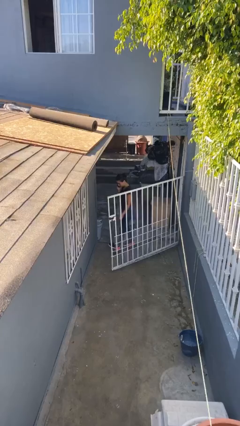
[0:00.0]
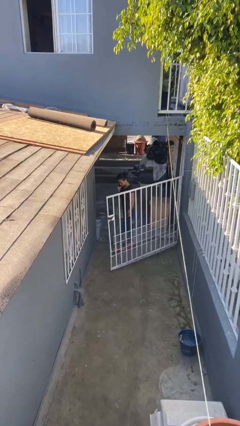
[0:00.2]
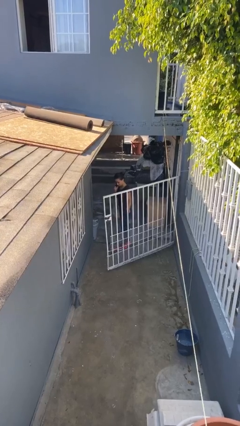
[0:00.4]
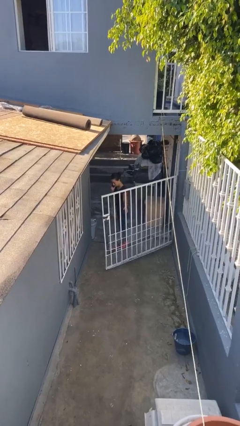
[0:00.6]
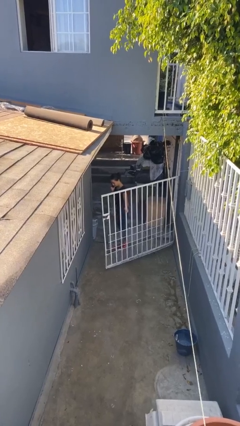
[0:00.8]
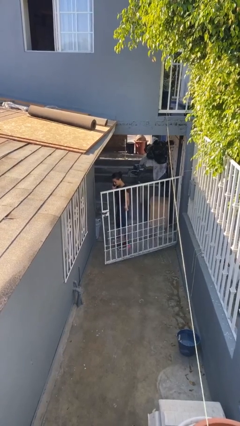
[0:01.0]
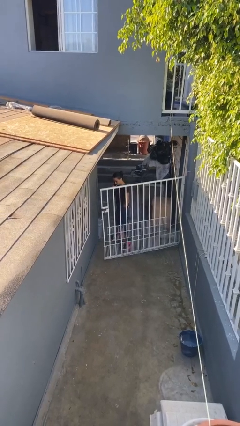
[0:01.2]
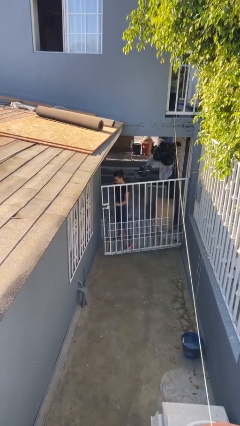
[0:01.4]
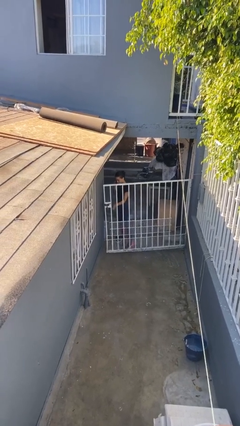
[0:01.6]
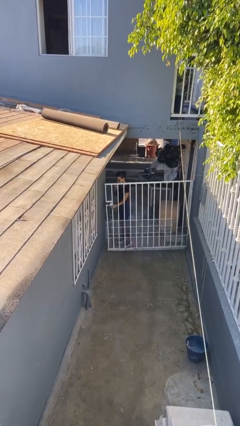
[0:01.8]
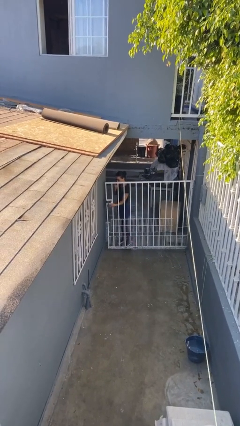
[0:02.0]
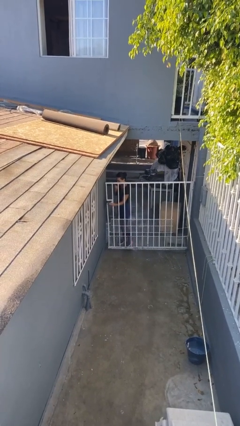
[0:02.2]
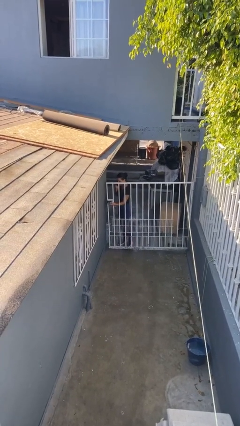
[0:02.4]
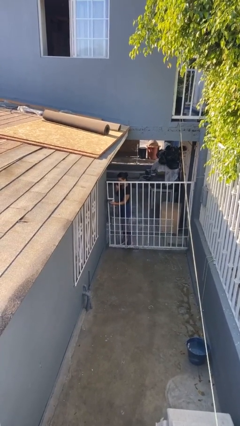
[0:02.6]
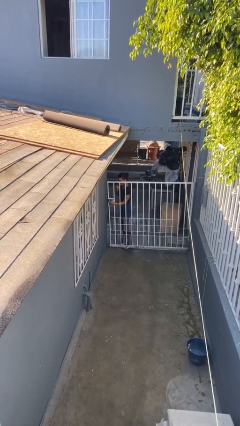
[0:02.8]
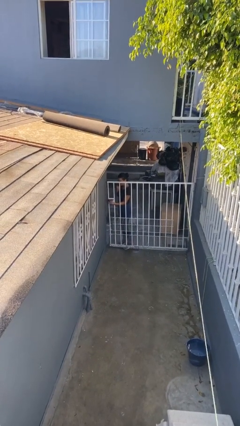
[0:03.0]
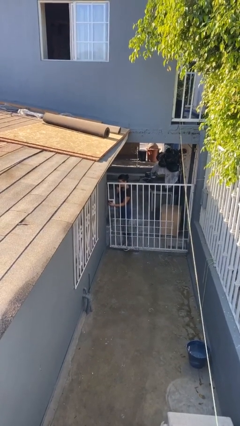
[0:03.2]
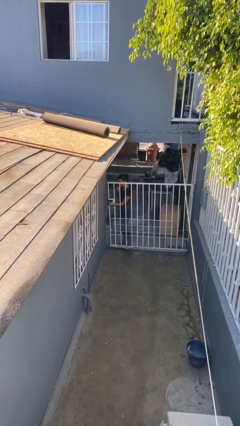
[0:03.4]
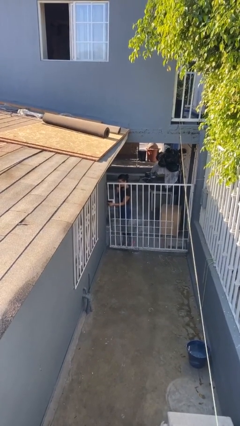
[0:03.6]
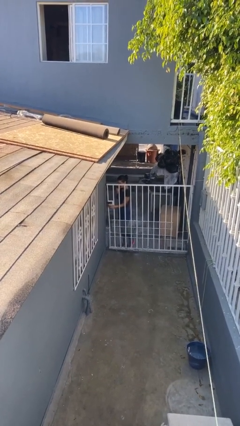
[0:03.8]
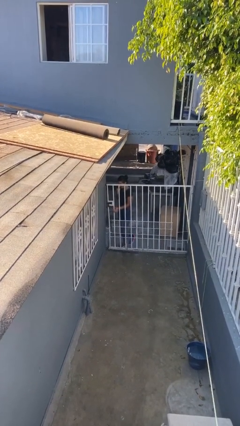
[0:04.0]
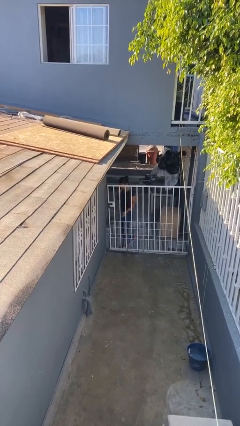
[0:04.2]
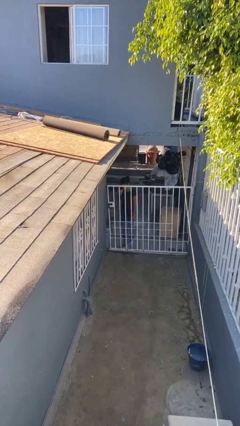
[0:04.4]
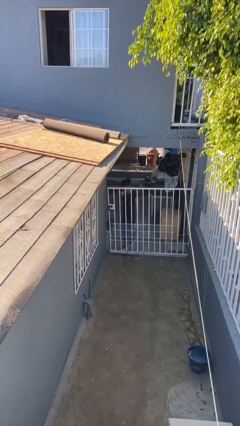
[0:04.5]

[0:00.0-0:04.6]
person closes facility door

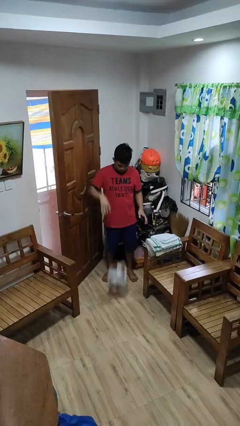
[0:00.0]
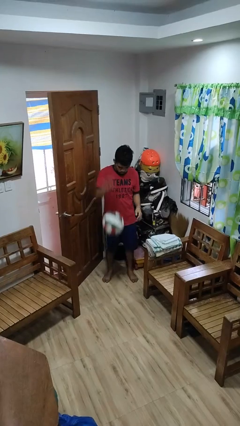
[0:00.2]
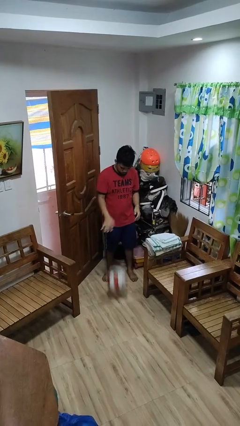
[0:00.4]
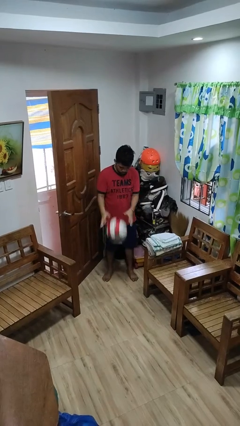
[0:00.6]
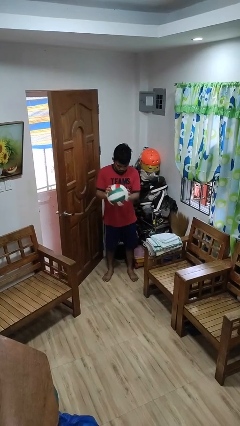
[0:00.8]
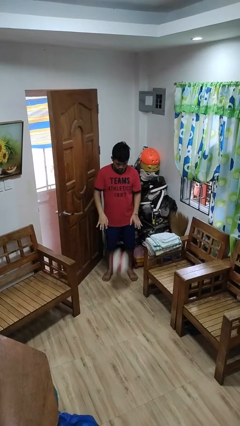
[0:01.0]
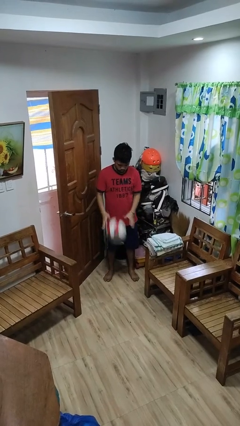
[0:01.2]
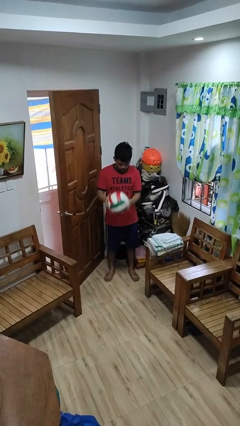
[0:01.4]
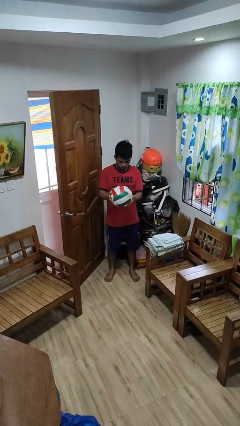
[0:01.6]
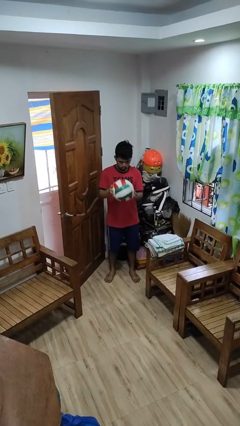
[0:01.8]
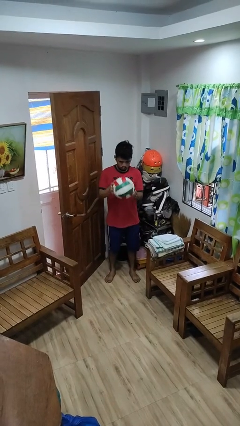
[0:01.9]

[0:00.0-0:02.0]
person bounces ball on floor

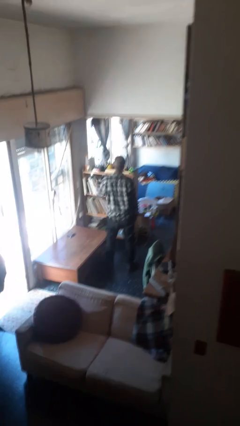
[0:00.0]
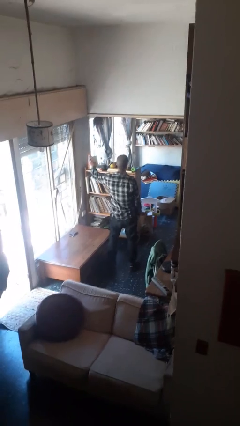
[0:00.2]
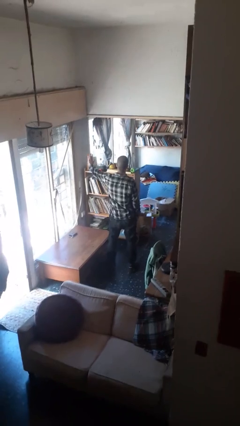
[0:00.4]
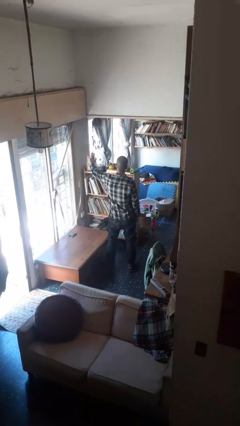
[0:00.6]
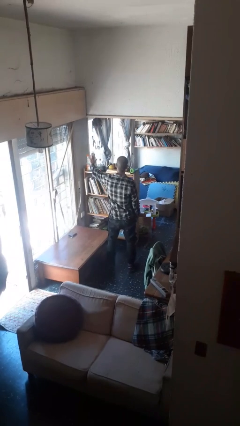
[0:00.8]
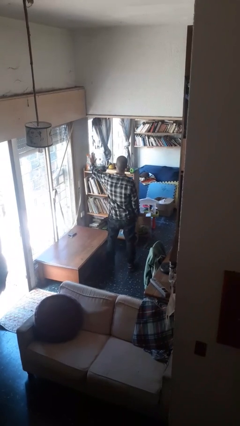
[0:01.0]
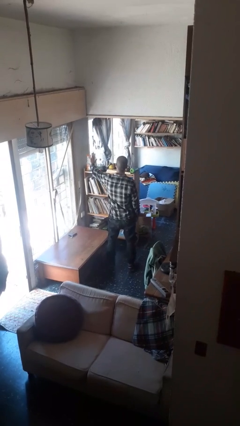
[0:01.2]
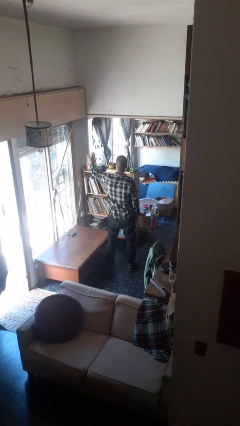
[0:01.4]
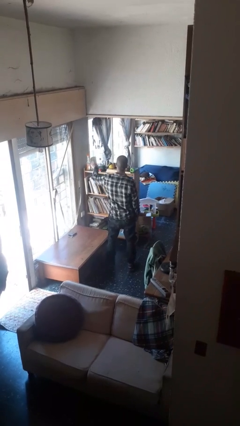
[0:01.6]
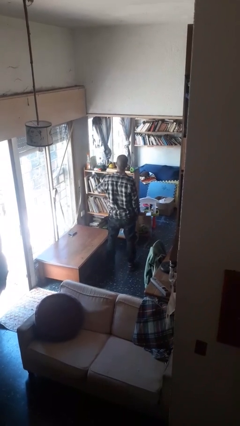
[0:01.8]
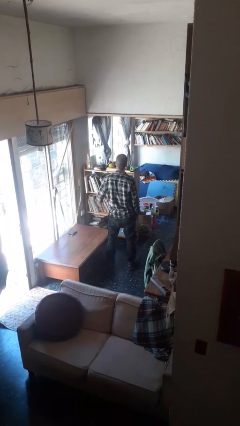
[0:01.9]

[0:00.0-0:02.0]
person gestures stop

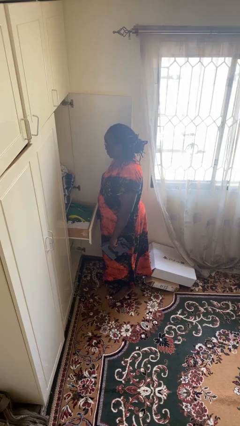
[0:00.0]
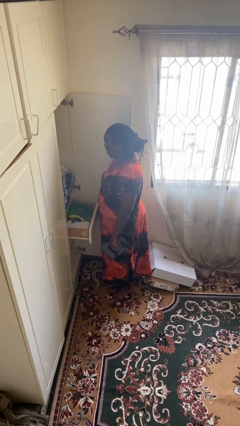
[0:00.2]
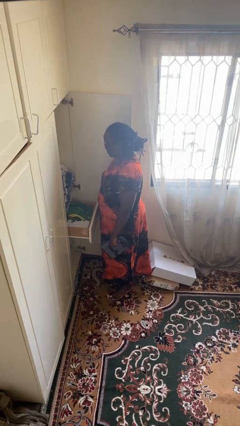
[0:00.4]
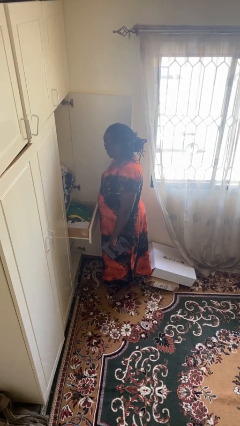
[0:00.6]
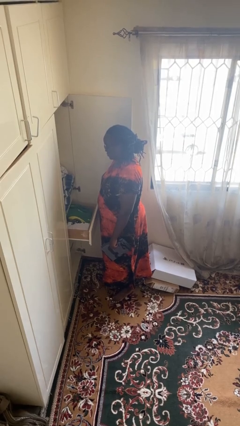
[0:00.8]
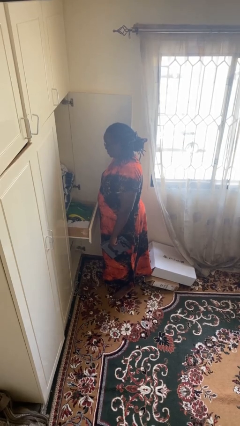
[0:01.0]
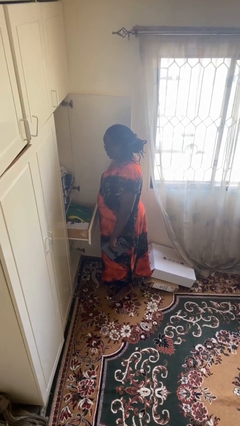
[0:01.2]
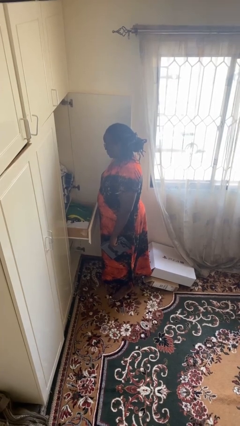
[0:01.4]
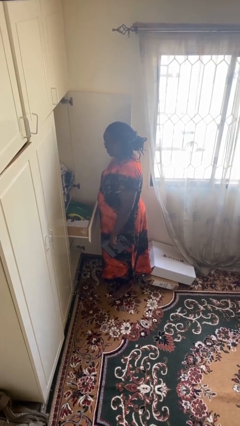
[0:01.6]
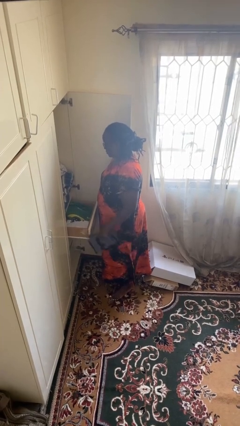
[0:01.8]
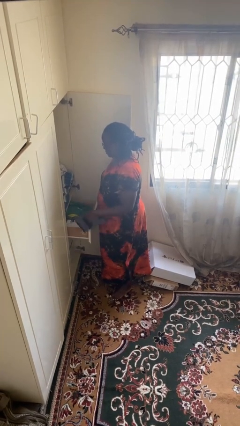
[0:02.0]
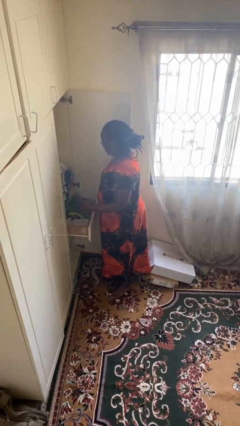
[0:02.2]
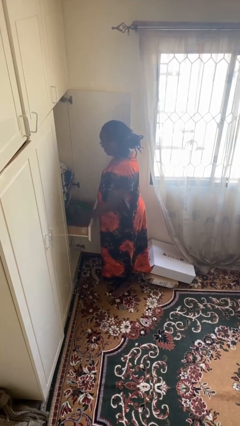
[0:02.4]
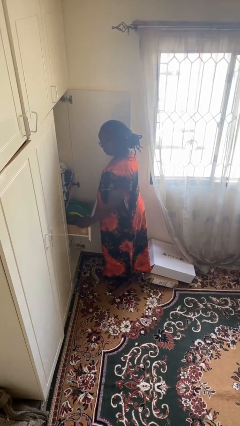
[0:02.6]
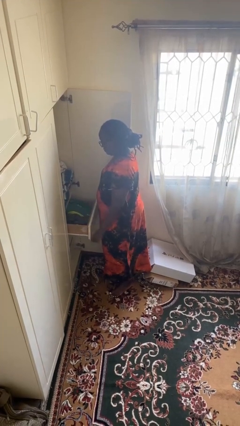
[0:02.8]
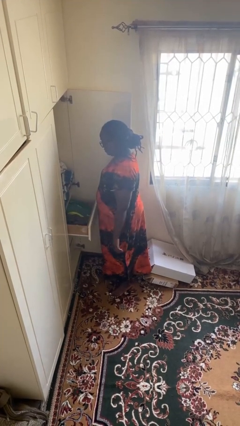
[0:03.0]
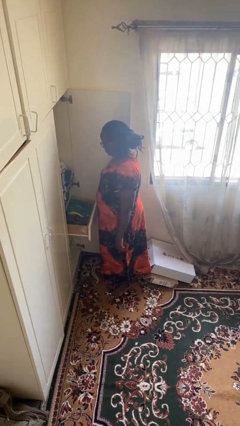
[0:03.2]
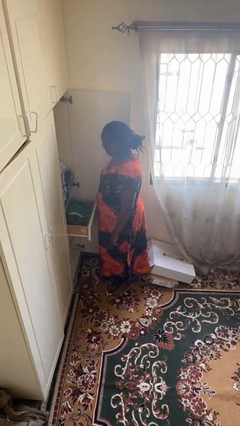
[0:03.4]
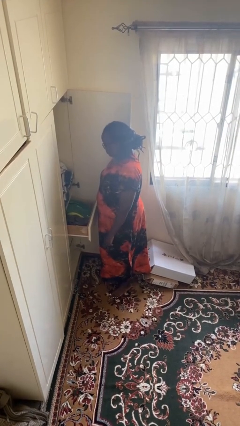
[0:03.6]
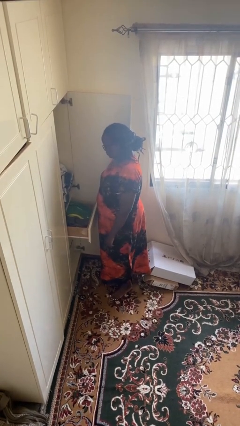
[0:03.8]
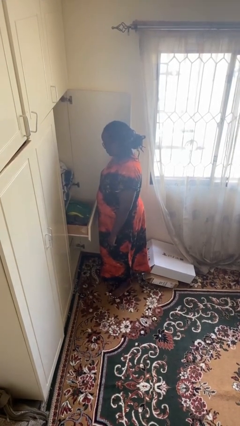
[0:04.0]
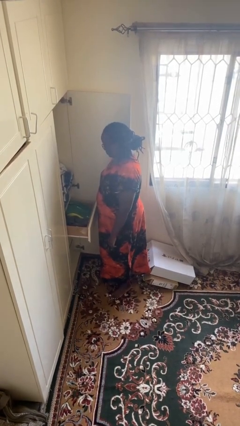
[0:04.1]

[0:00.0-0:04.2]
person puts clothes into dresser

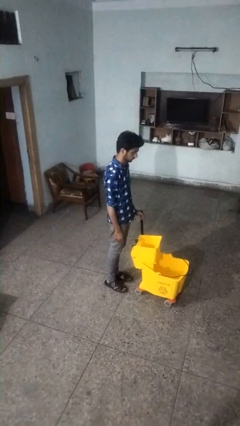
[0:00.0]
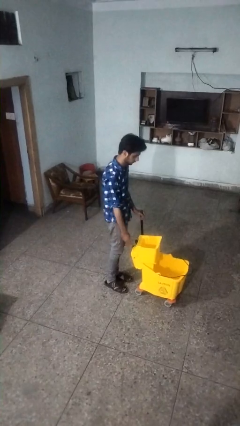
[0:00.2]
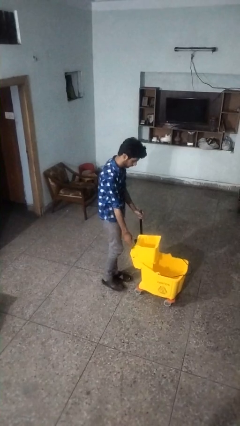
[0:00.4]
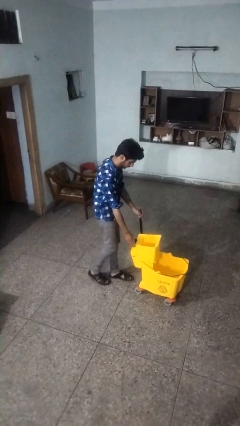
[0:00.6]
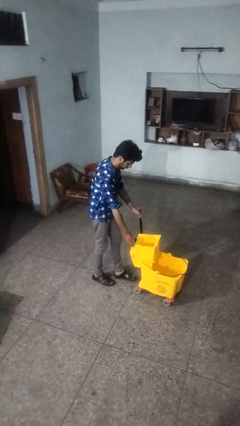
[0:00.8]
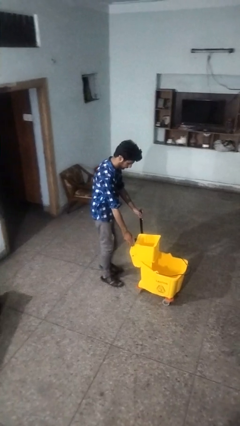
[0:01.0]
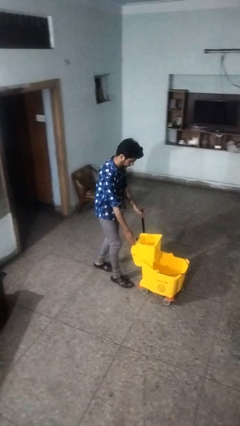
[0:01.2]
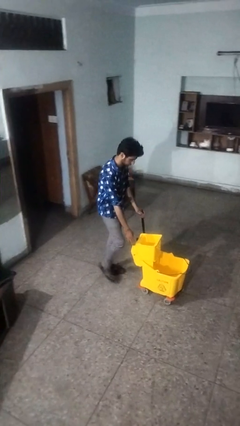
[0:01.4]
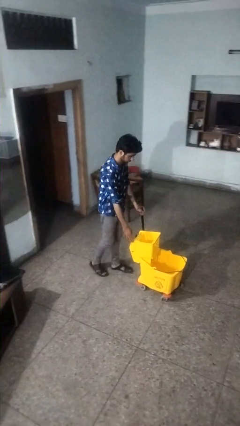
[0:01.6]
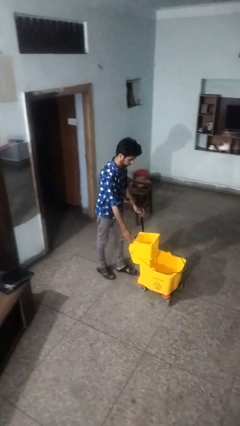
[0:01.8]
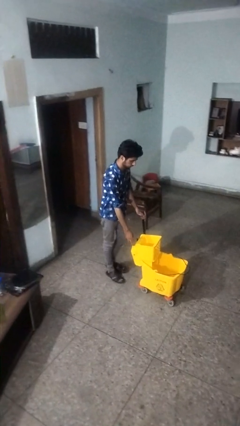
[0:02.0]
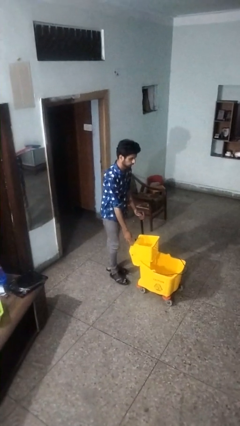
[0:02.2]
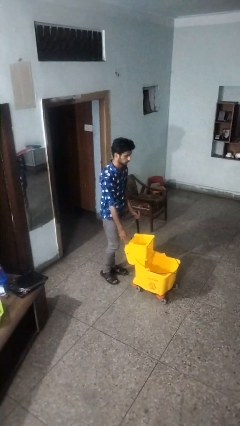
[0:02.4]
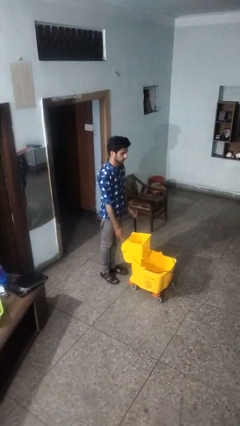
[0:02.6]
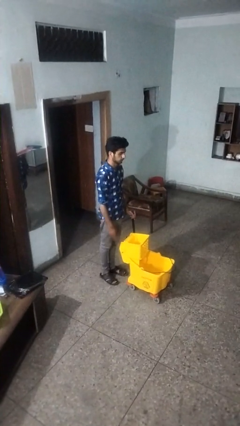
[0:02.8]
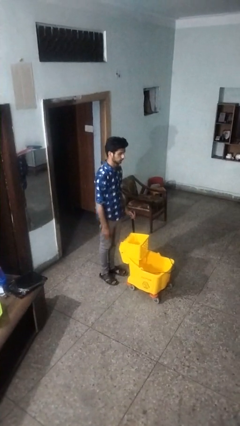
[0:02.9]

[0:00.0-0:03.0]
person pulls wheeled cart

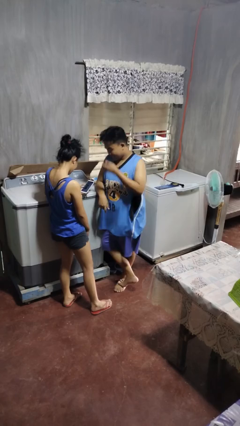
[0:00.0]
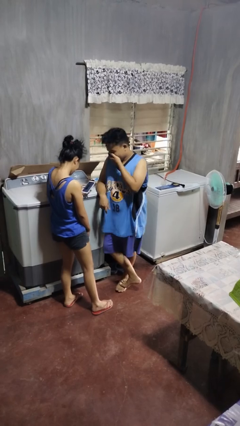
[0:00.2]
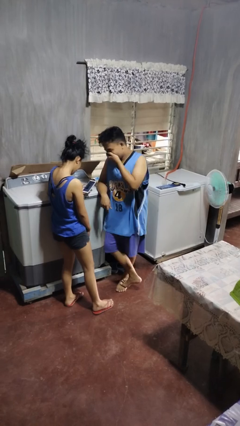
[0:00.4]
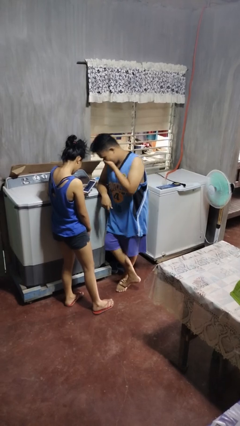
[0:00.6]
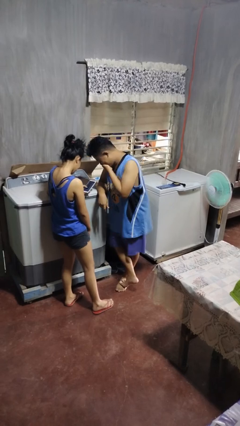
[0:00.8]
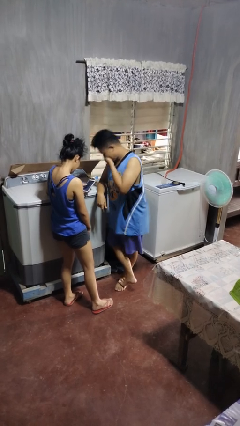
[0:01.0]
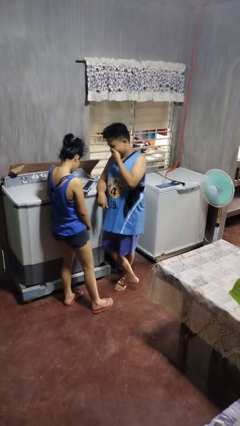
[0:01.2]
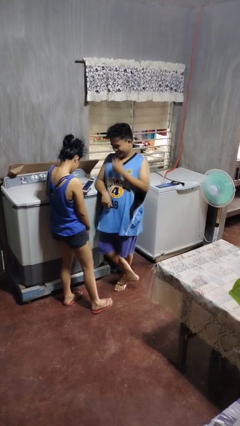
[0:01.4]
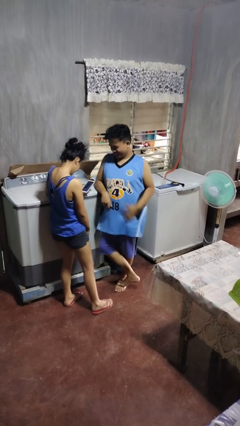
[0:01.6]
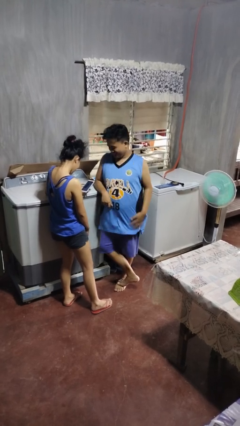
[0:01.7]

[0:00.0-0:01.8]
person laughs with person
